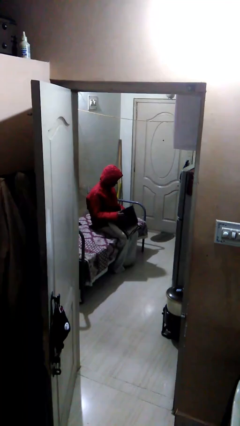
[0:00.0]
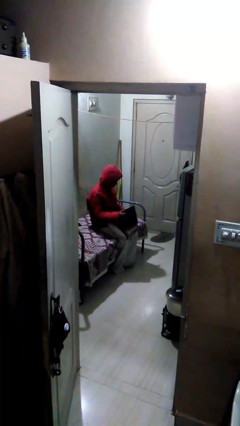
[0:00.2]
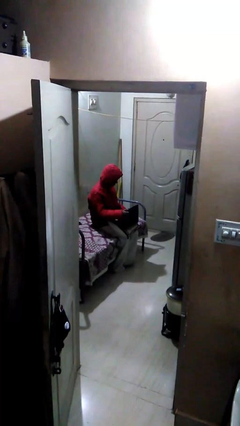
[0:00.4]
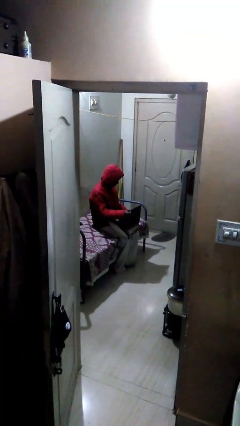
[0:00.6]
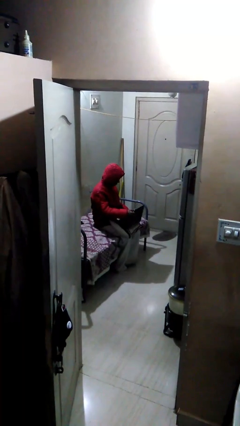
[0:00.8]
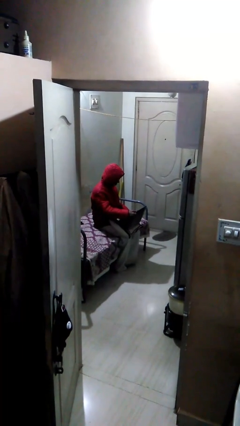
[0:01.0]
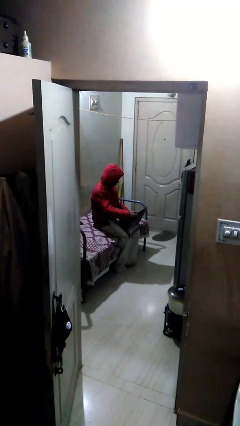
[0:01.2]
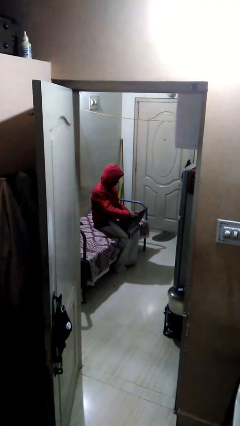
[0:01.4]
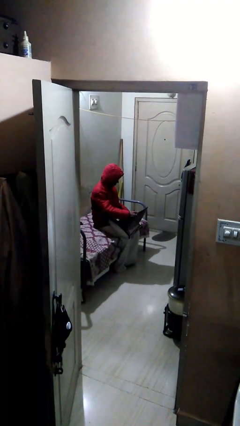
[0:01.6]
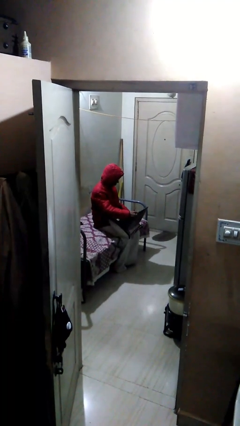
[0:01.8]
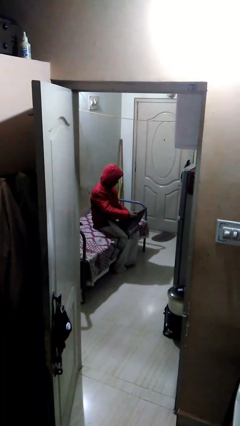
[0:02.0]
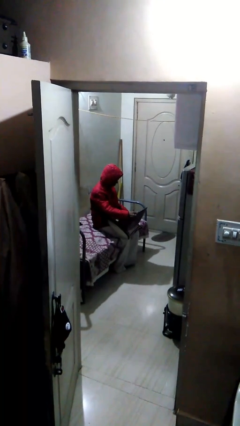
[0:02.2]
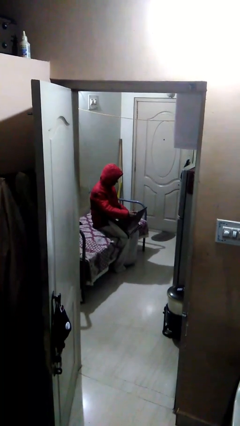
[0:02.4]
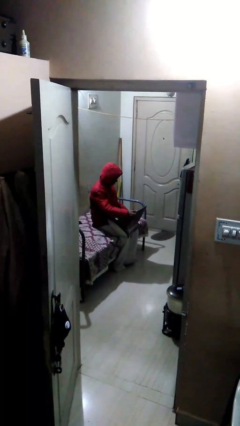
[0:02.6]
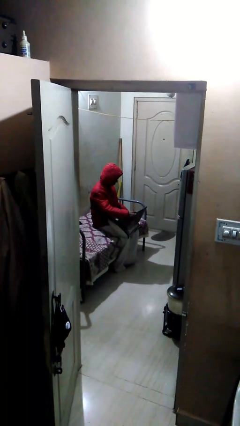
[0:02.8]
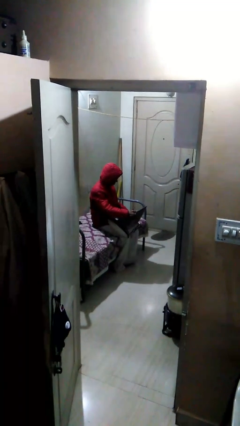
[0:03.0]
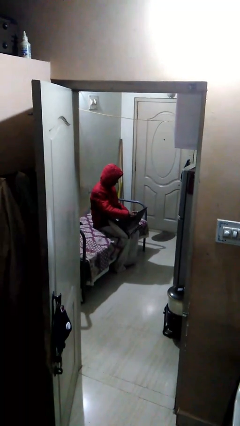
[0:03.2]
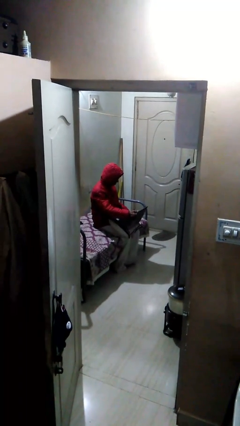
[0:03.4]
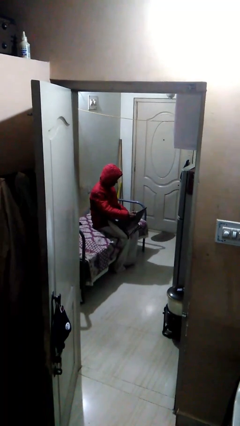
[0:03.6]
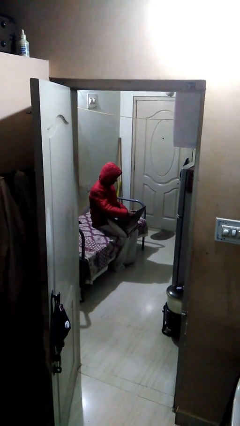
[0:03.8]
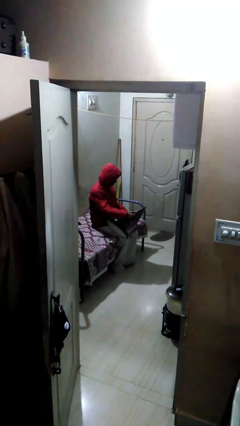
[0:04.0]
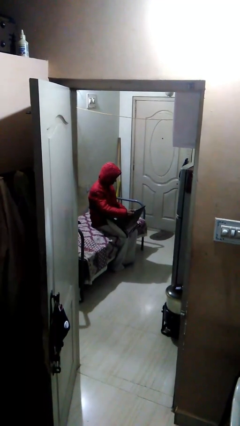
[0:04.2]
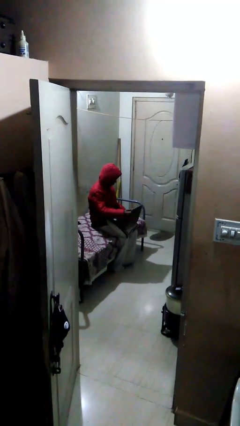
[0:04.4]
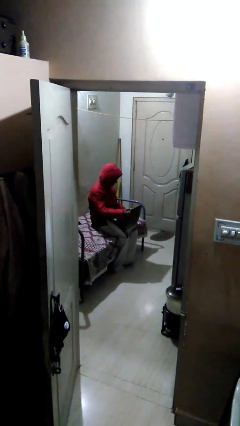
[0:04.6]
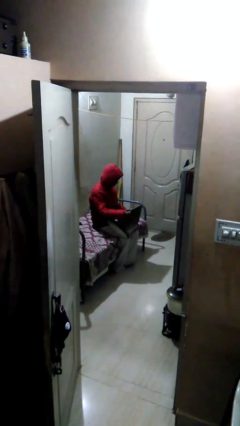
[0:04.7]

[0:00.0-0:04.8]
person interacts with laptop

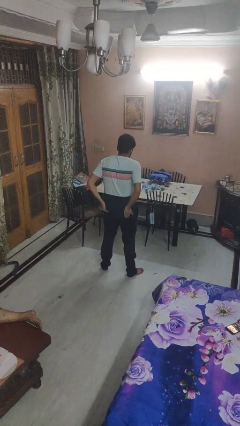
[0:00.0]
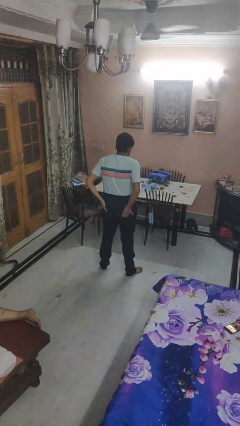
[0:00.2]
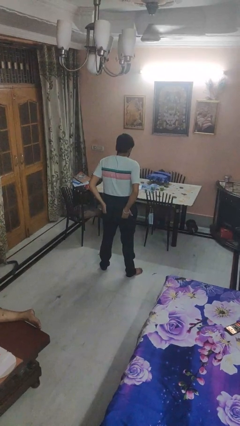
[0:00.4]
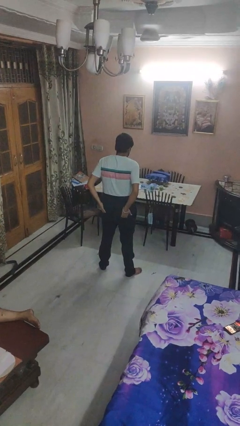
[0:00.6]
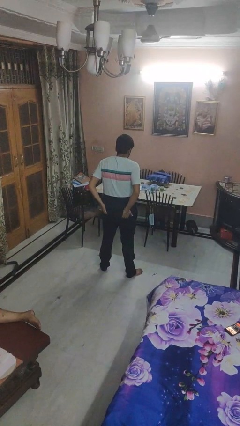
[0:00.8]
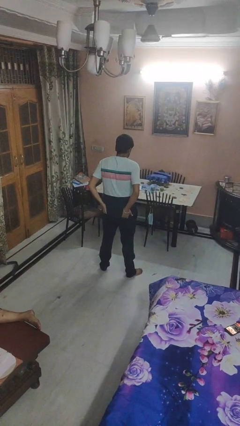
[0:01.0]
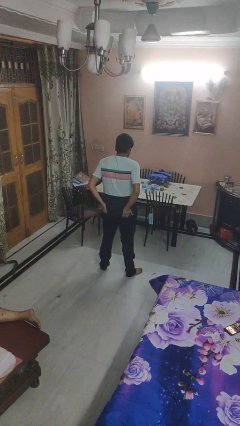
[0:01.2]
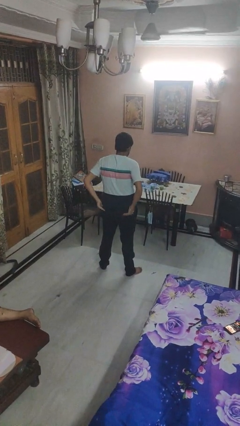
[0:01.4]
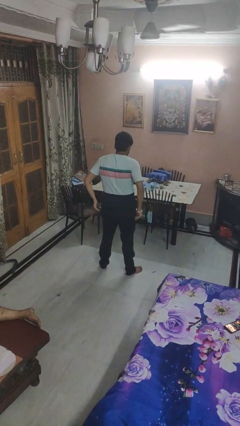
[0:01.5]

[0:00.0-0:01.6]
person puts hands in back pockets

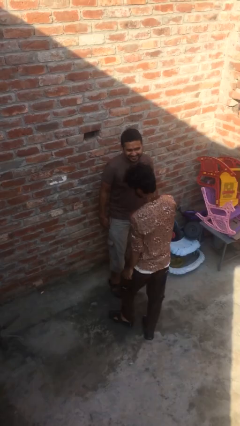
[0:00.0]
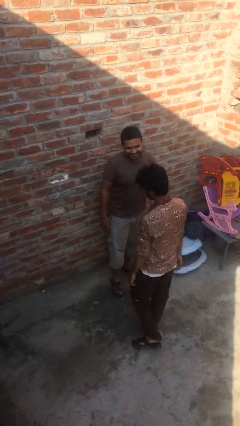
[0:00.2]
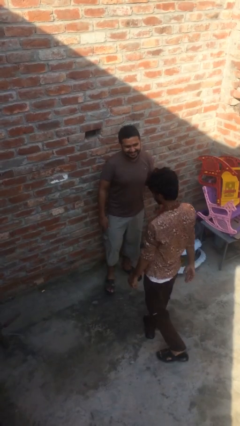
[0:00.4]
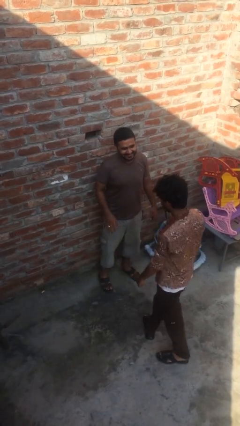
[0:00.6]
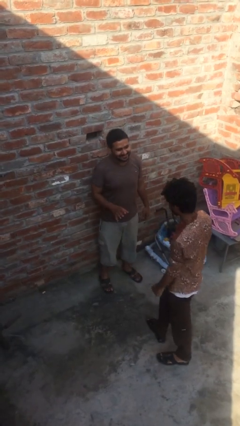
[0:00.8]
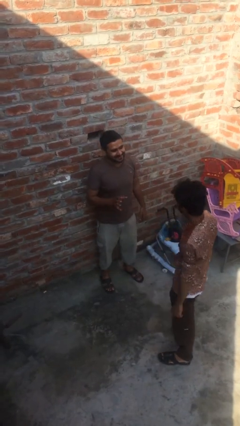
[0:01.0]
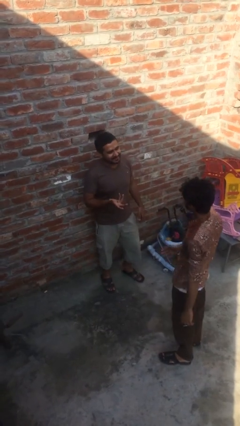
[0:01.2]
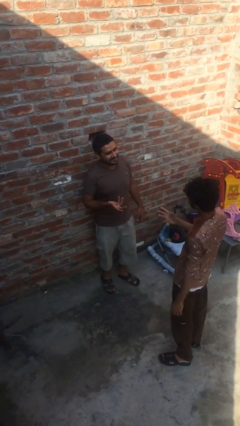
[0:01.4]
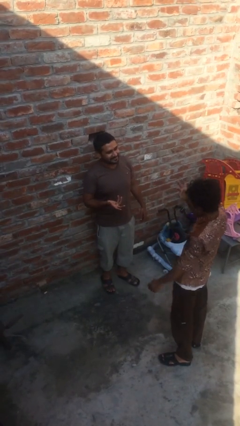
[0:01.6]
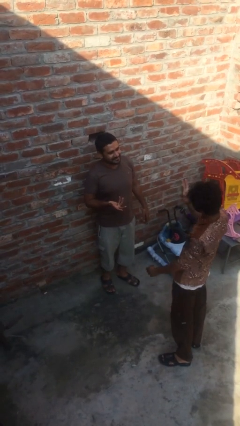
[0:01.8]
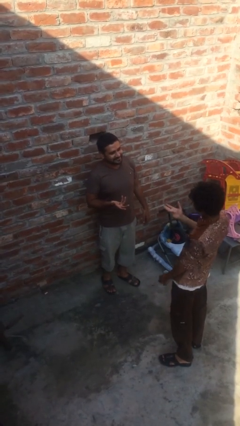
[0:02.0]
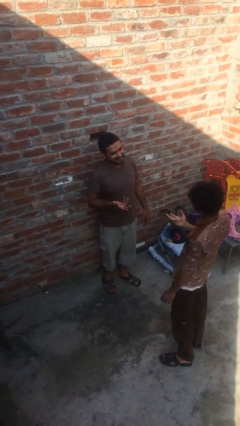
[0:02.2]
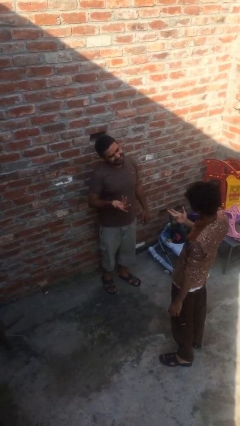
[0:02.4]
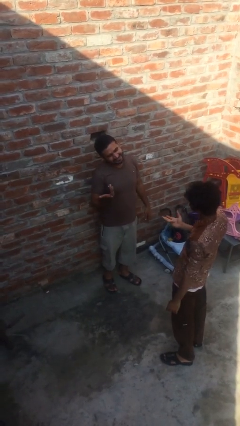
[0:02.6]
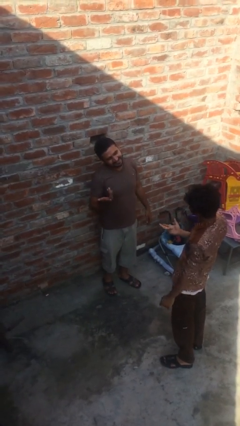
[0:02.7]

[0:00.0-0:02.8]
person talks to person

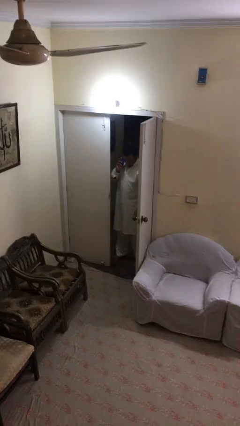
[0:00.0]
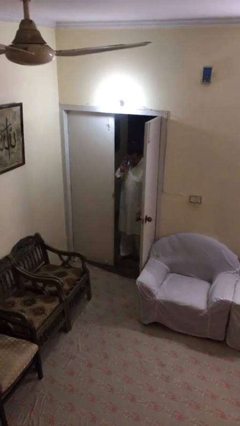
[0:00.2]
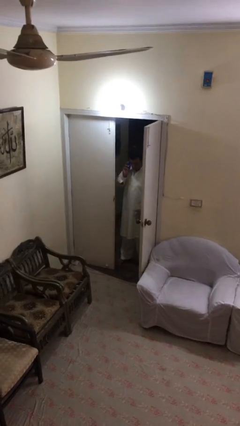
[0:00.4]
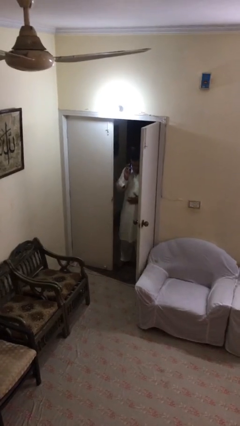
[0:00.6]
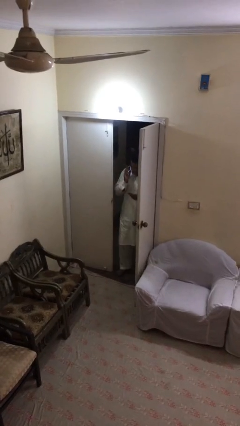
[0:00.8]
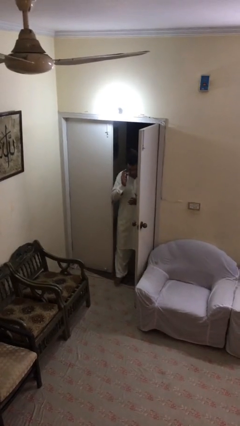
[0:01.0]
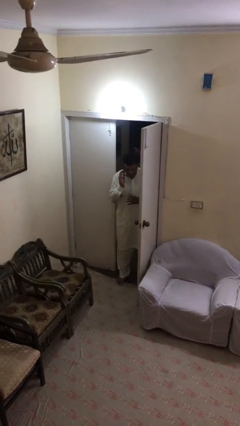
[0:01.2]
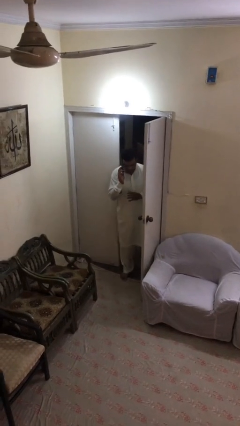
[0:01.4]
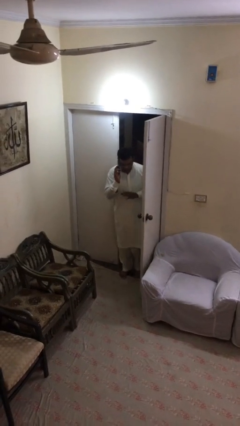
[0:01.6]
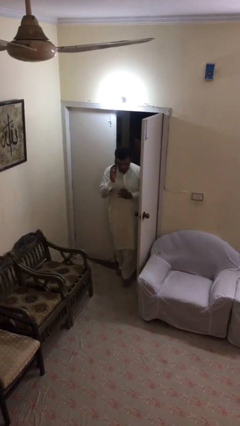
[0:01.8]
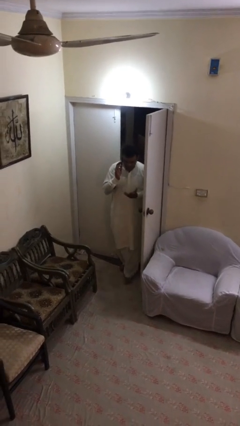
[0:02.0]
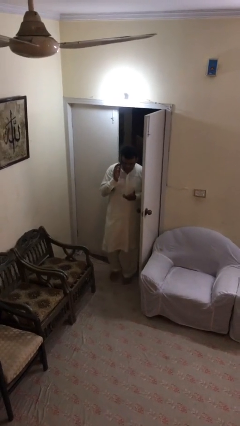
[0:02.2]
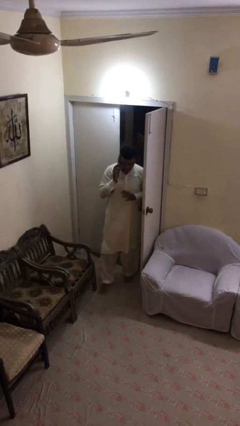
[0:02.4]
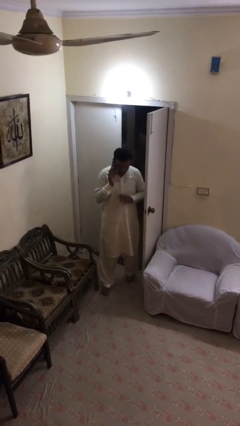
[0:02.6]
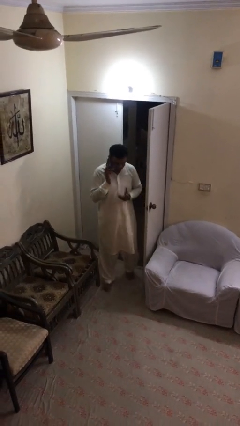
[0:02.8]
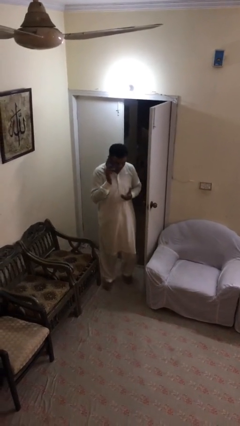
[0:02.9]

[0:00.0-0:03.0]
person enters scene through structure

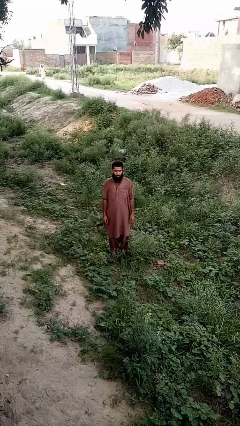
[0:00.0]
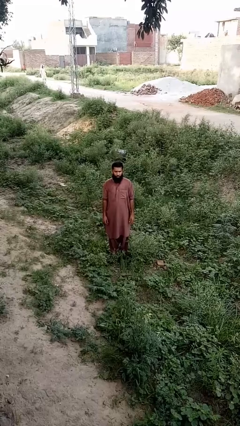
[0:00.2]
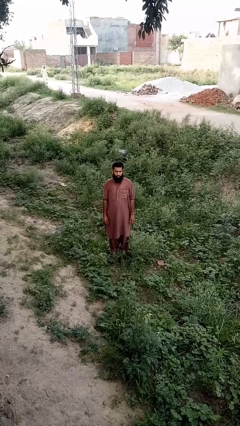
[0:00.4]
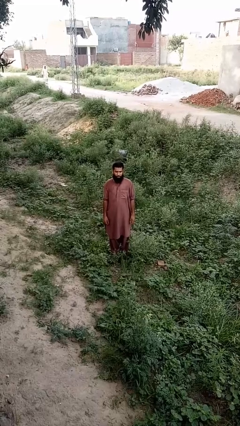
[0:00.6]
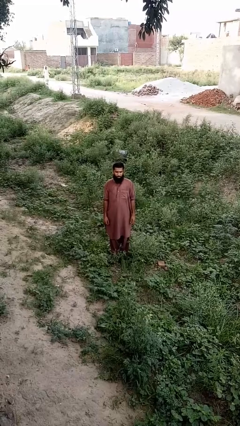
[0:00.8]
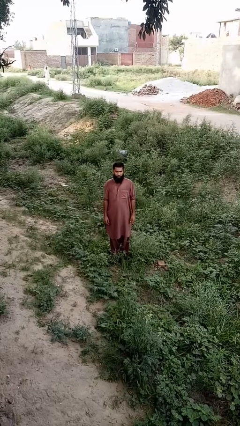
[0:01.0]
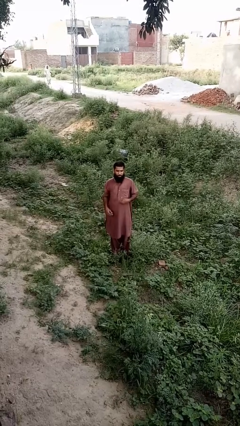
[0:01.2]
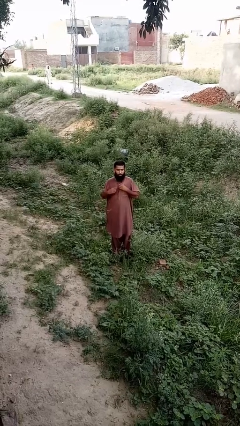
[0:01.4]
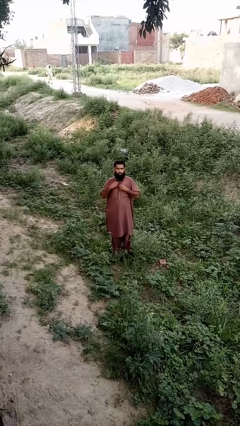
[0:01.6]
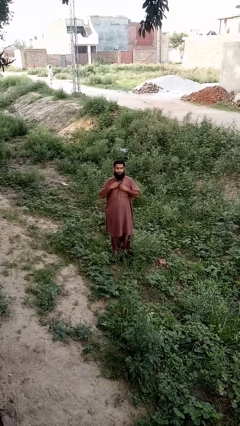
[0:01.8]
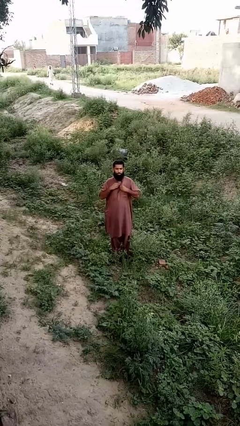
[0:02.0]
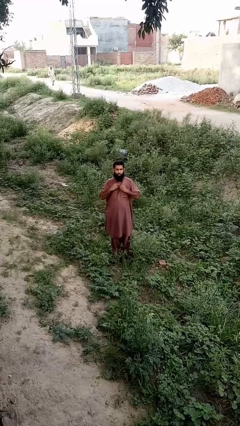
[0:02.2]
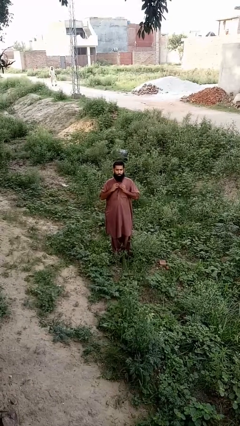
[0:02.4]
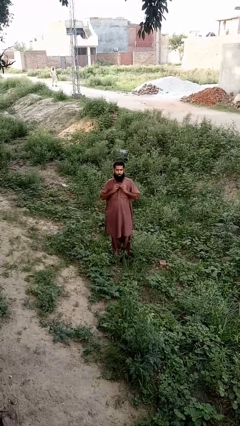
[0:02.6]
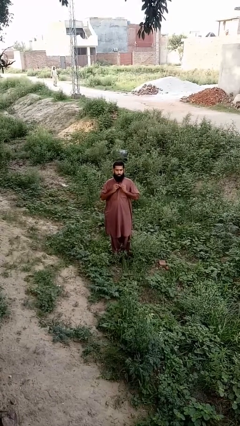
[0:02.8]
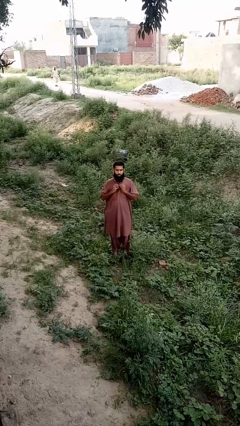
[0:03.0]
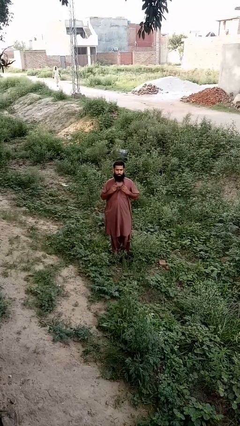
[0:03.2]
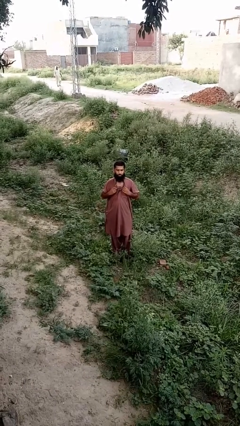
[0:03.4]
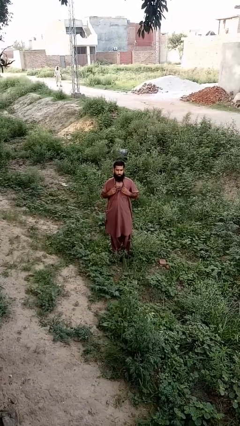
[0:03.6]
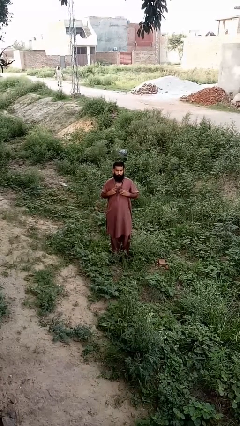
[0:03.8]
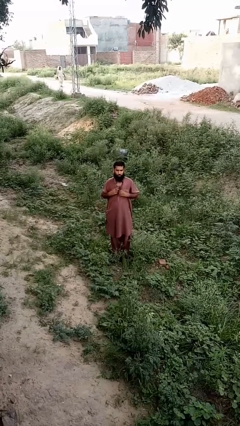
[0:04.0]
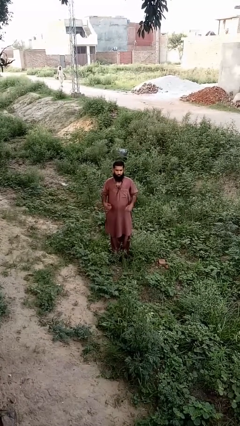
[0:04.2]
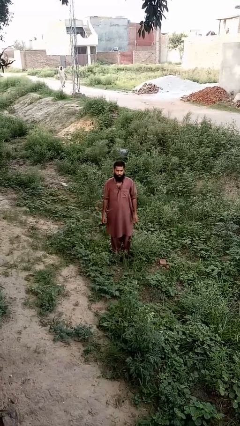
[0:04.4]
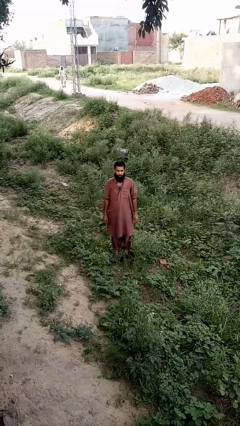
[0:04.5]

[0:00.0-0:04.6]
person unbuttons shirt

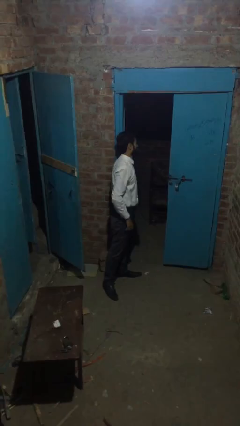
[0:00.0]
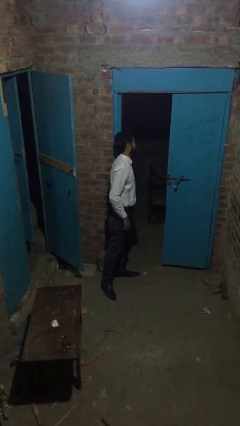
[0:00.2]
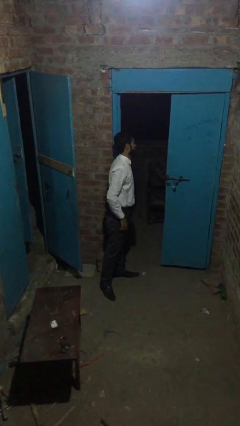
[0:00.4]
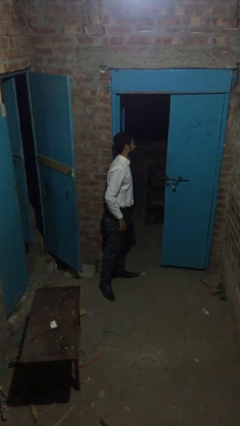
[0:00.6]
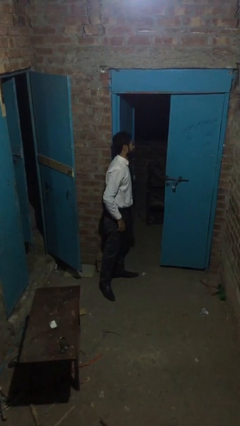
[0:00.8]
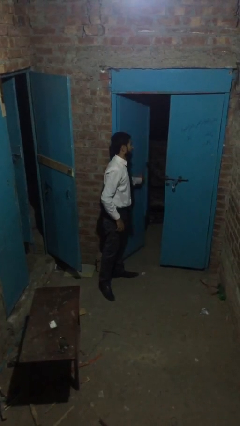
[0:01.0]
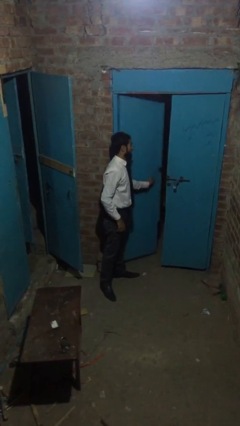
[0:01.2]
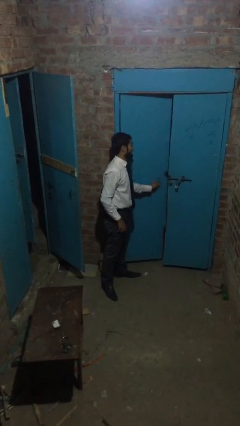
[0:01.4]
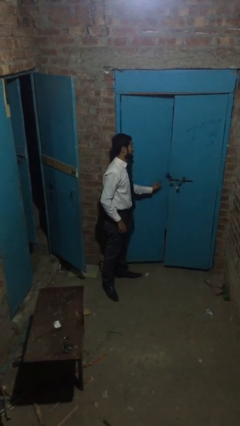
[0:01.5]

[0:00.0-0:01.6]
person closes facility door
